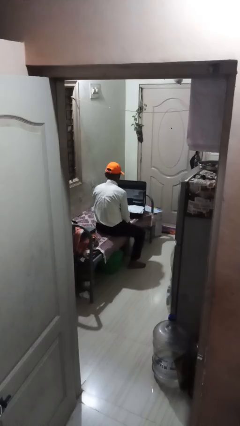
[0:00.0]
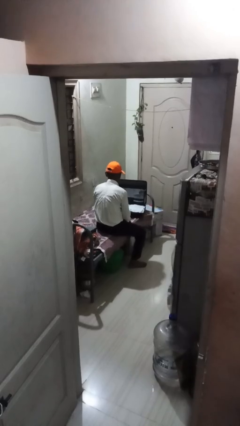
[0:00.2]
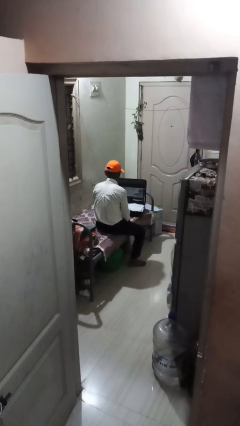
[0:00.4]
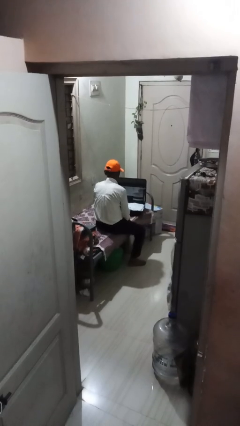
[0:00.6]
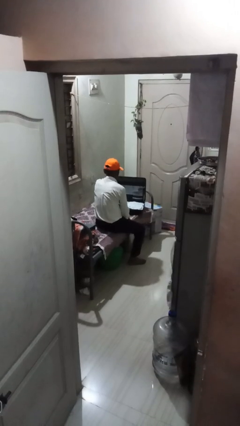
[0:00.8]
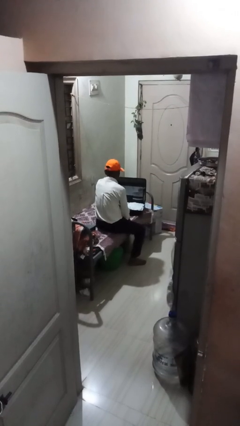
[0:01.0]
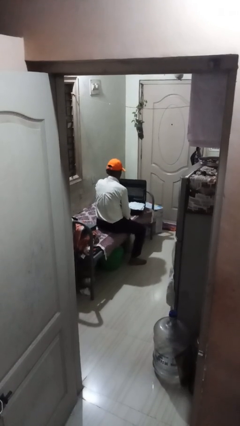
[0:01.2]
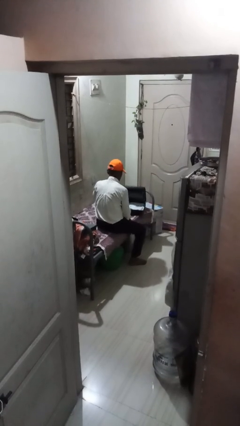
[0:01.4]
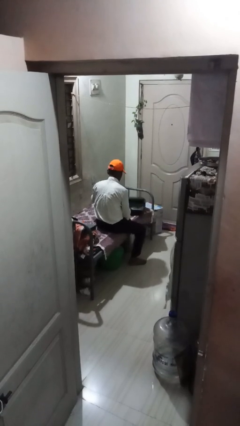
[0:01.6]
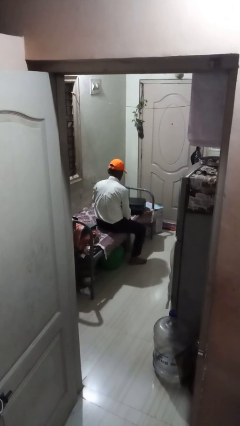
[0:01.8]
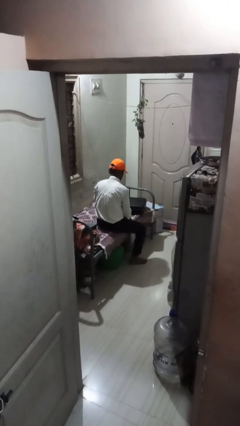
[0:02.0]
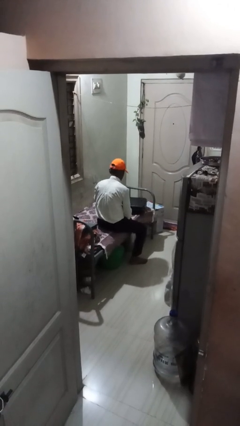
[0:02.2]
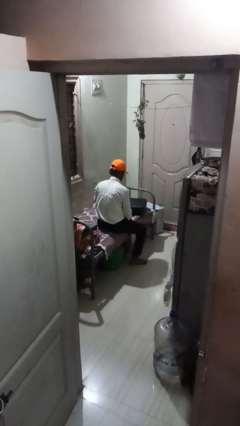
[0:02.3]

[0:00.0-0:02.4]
person closes suitcase

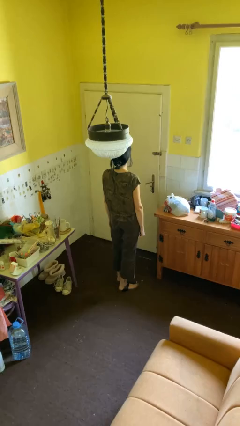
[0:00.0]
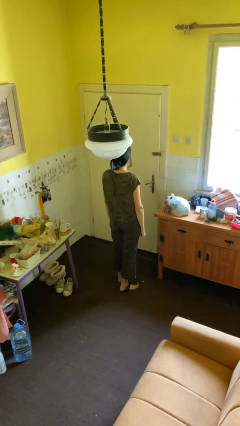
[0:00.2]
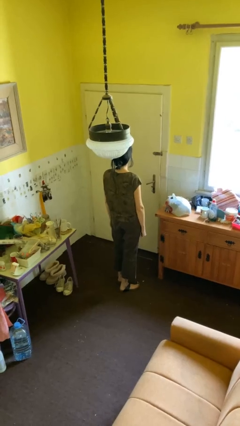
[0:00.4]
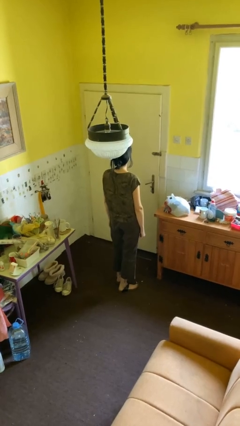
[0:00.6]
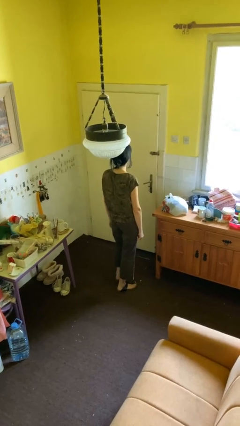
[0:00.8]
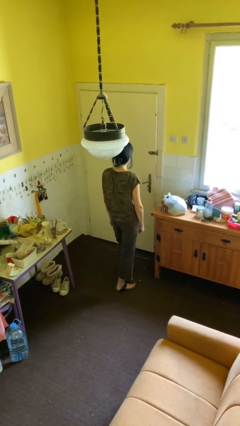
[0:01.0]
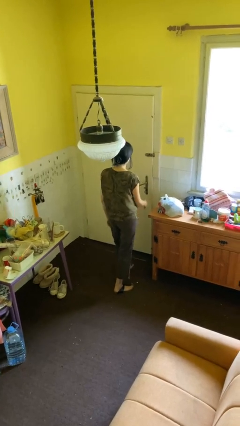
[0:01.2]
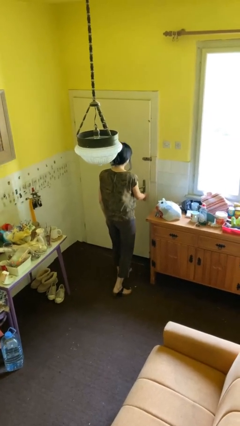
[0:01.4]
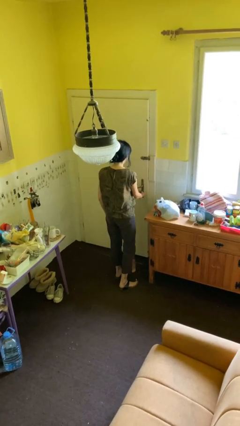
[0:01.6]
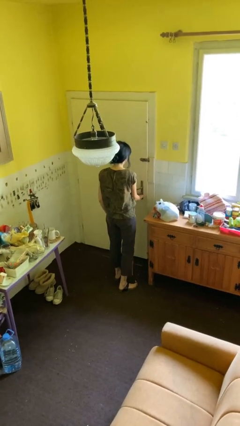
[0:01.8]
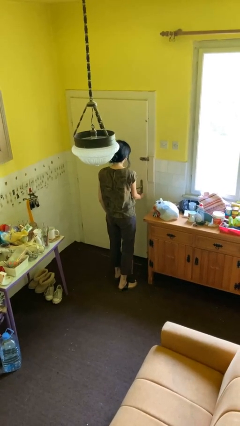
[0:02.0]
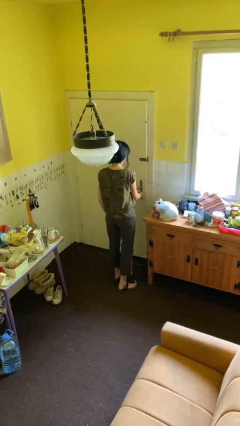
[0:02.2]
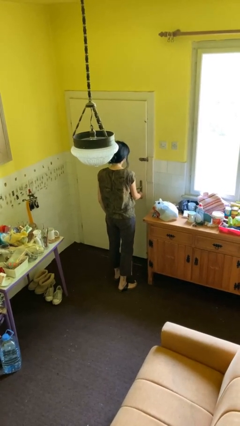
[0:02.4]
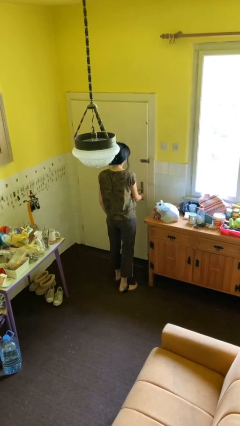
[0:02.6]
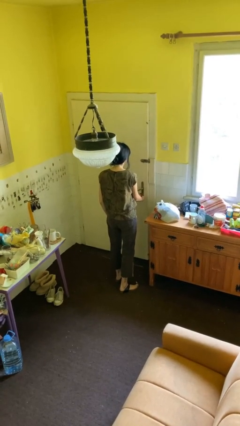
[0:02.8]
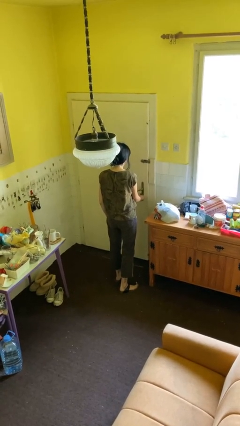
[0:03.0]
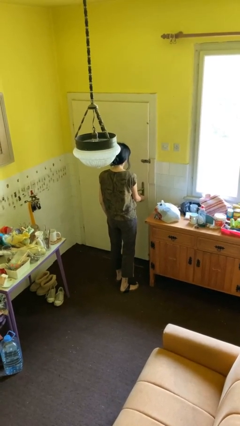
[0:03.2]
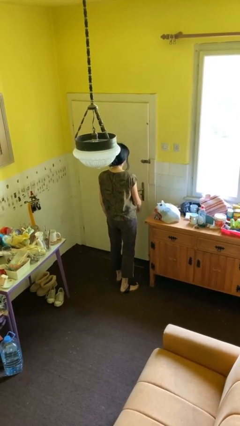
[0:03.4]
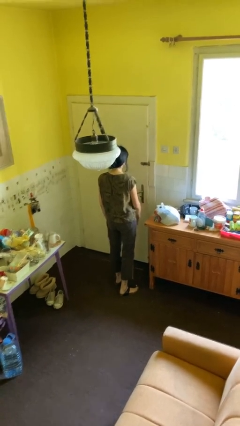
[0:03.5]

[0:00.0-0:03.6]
person unlocks door with keys

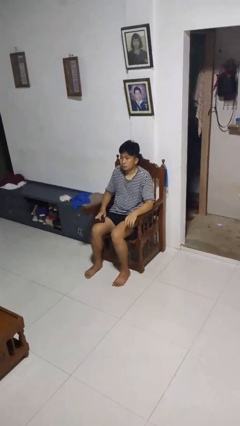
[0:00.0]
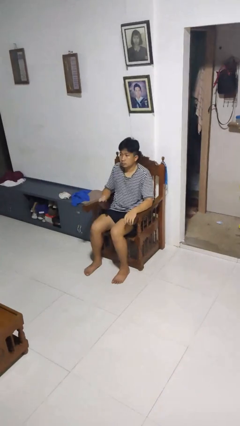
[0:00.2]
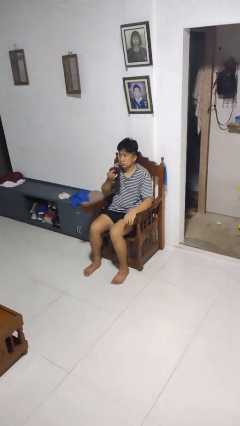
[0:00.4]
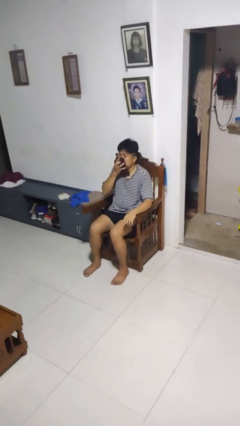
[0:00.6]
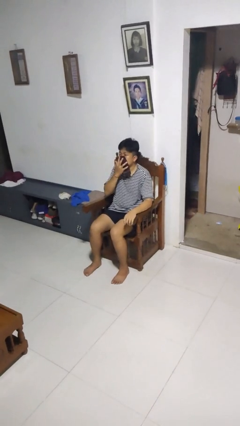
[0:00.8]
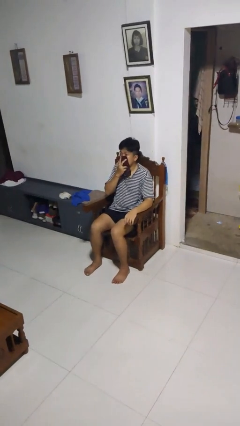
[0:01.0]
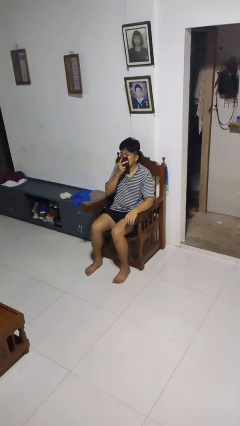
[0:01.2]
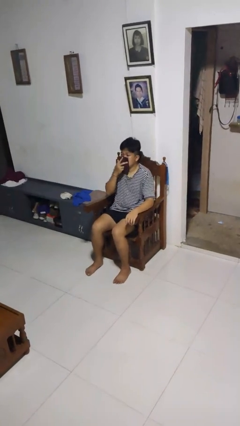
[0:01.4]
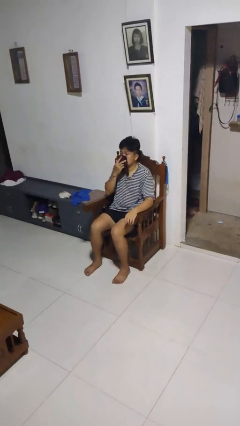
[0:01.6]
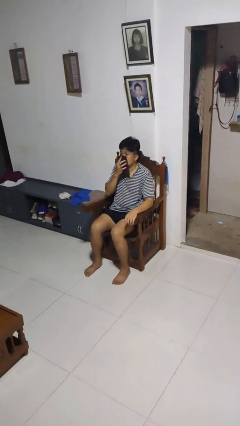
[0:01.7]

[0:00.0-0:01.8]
person blows nose

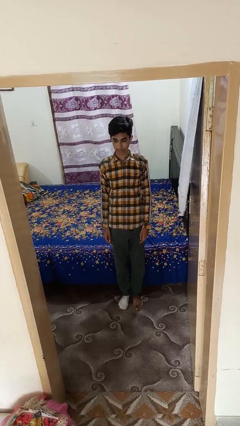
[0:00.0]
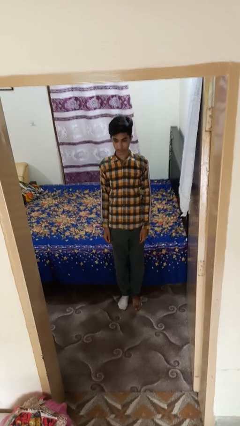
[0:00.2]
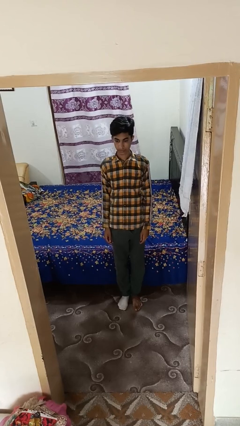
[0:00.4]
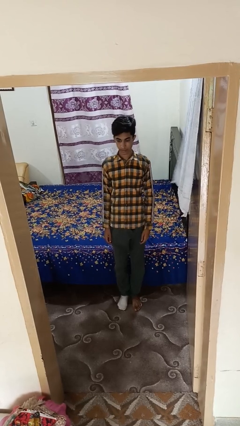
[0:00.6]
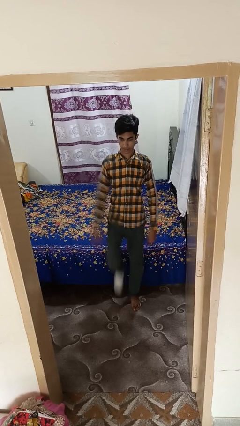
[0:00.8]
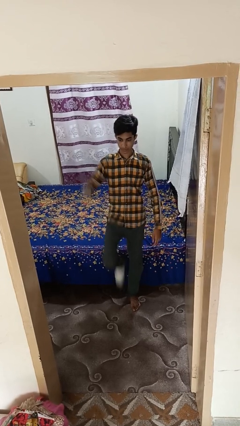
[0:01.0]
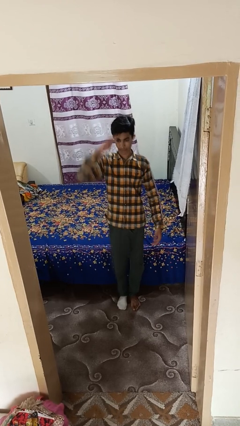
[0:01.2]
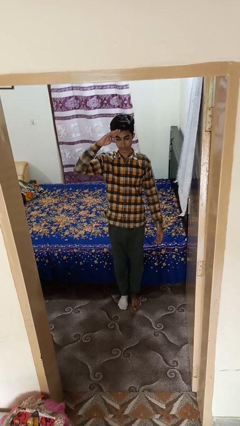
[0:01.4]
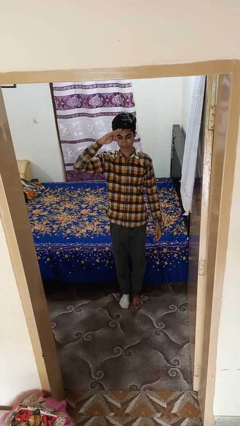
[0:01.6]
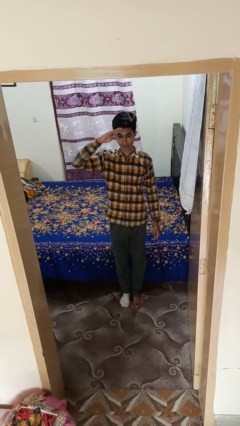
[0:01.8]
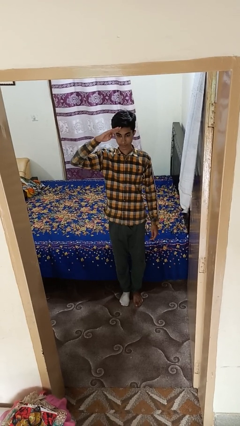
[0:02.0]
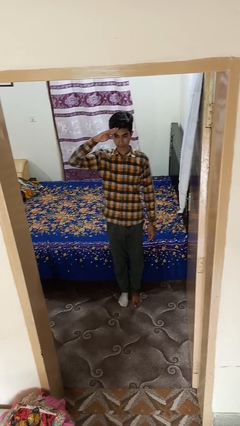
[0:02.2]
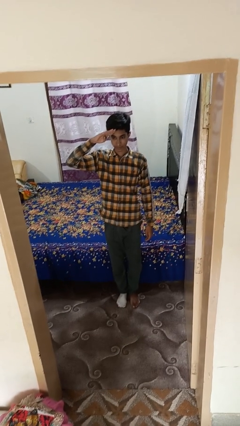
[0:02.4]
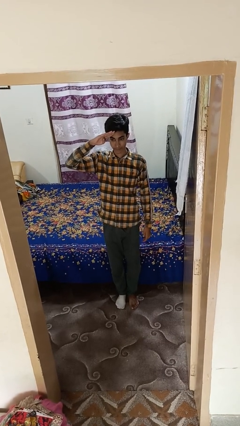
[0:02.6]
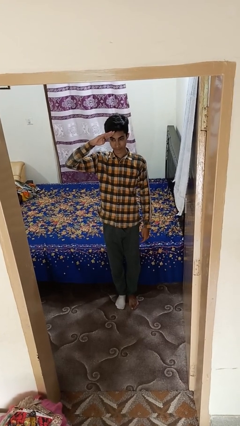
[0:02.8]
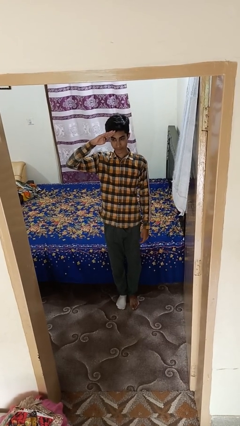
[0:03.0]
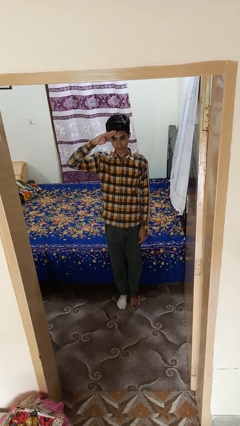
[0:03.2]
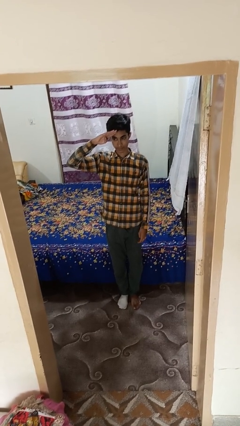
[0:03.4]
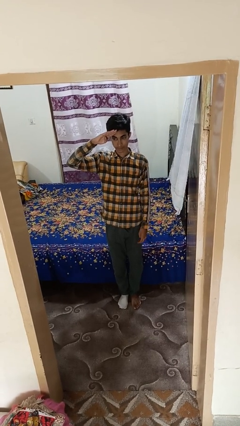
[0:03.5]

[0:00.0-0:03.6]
person salutes

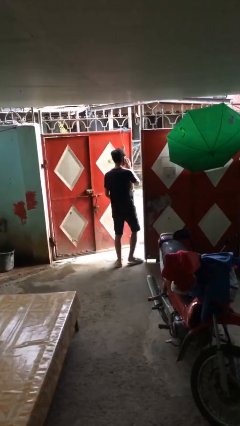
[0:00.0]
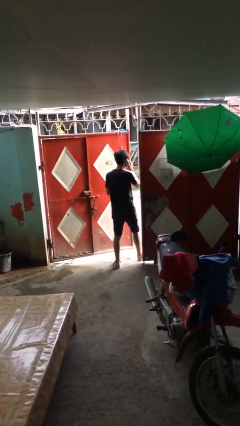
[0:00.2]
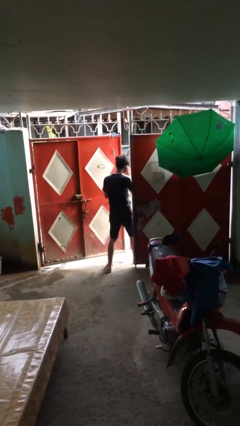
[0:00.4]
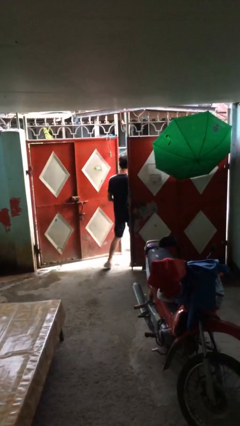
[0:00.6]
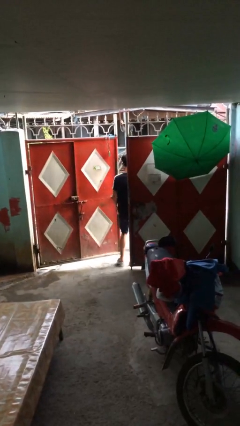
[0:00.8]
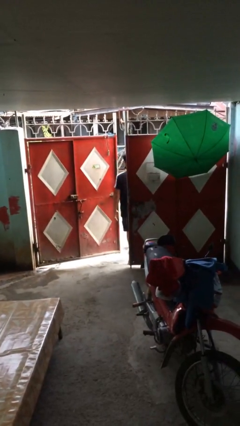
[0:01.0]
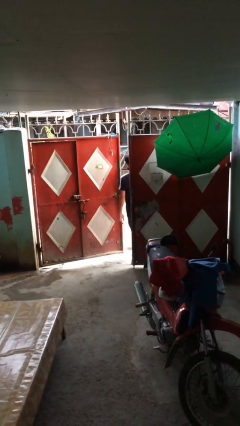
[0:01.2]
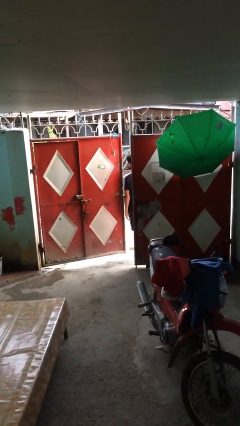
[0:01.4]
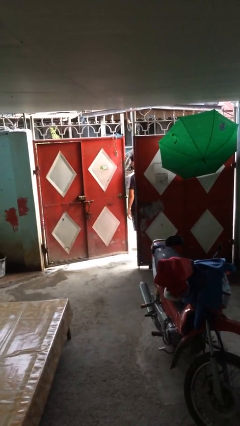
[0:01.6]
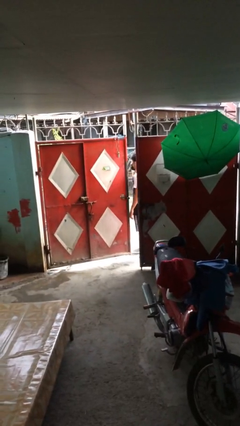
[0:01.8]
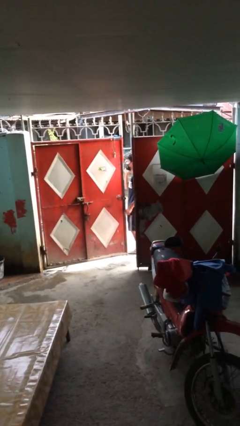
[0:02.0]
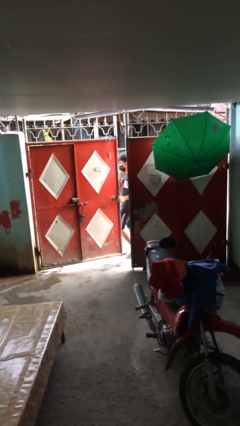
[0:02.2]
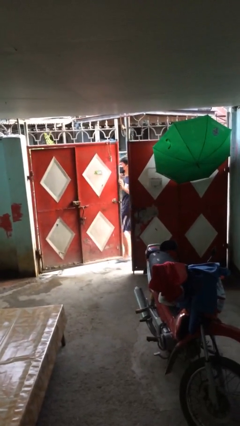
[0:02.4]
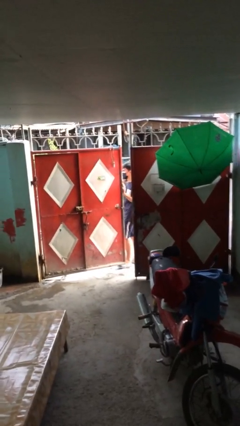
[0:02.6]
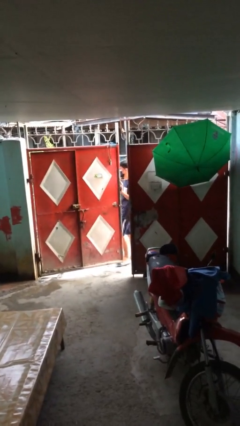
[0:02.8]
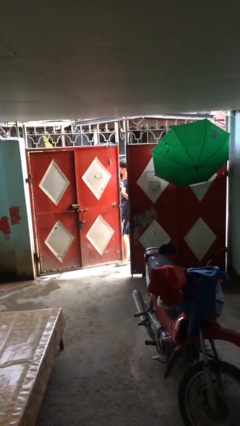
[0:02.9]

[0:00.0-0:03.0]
person exits scene through structure

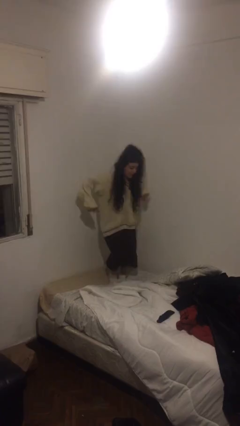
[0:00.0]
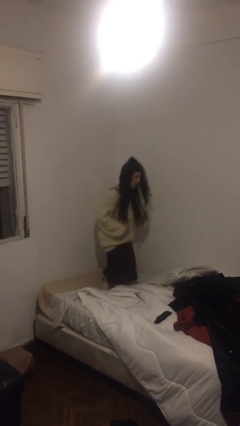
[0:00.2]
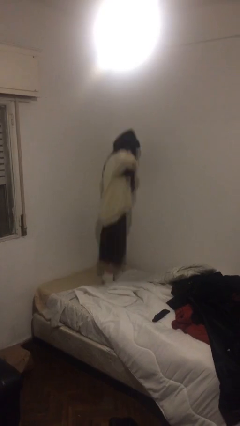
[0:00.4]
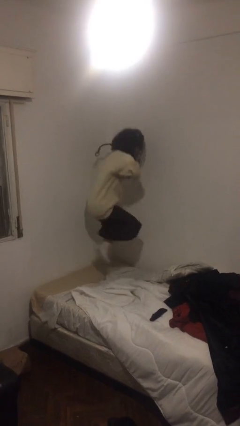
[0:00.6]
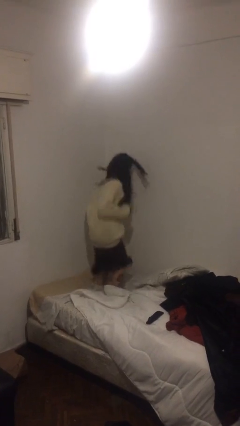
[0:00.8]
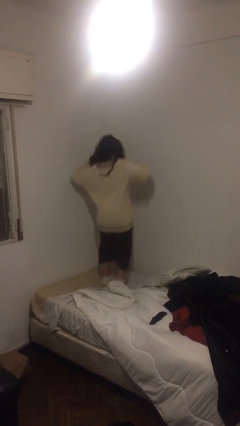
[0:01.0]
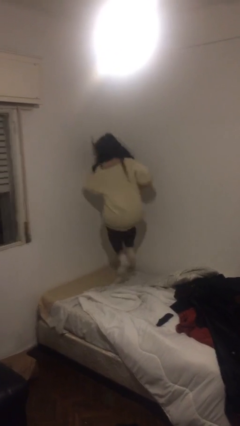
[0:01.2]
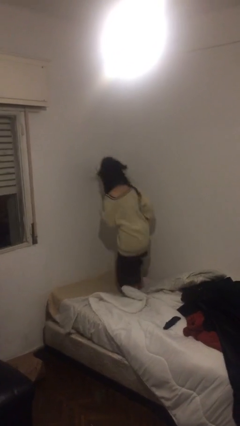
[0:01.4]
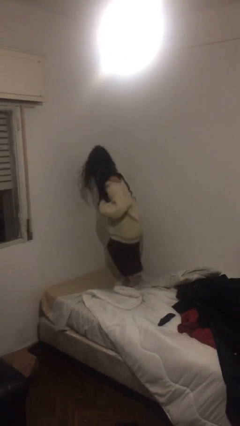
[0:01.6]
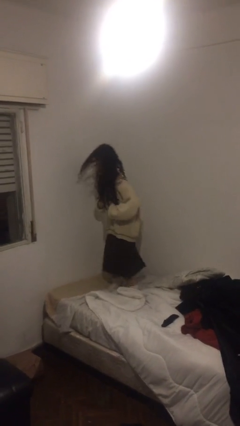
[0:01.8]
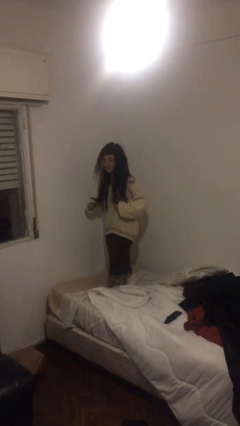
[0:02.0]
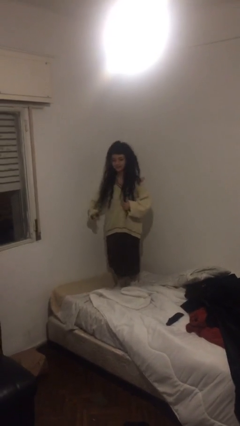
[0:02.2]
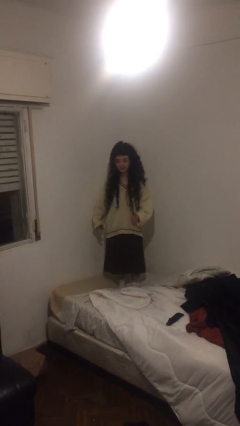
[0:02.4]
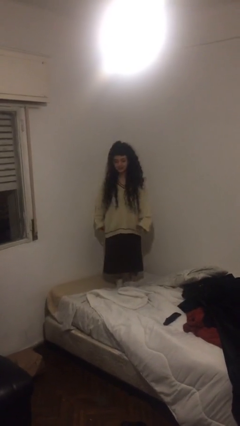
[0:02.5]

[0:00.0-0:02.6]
person jumps on bed

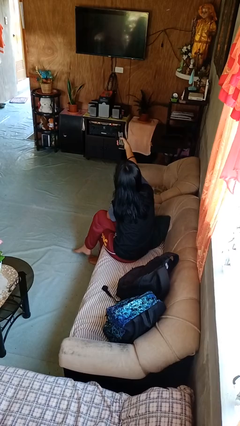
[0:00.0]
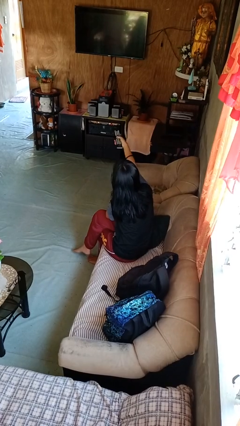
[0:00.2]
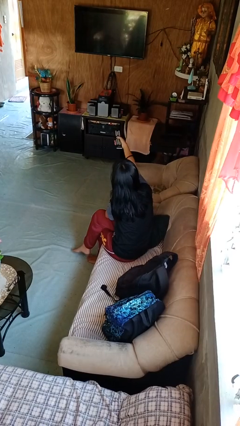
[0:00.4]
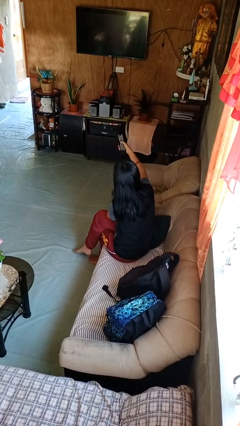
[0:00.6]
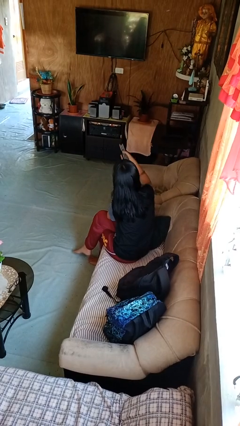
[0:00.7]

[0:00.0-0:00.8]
person uses television remote
